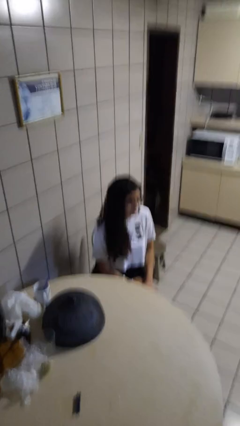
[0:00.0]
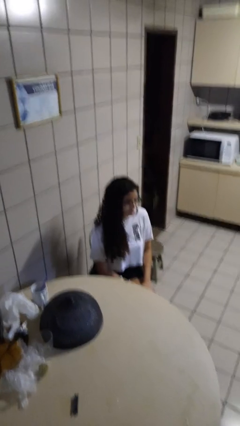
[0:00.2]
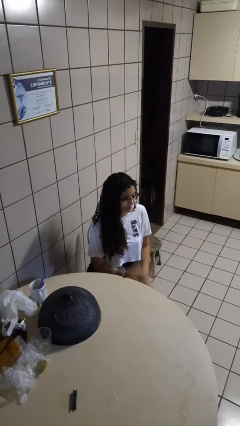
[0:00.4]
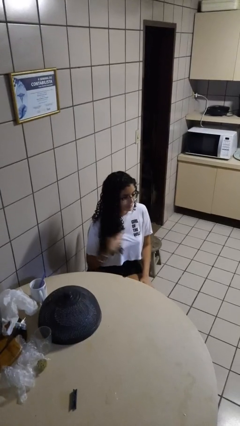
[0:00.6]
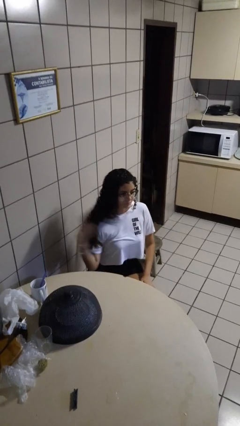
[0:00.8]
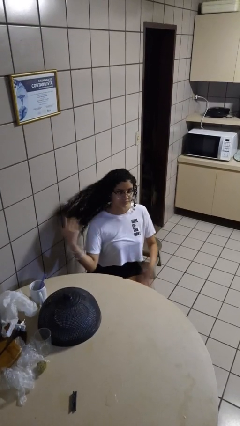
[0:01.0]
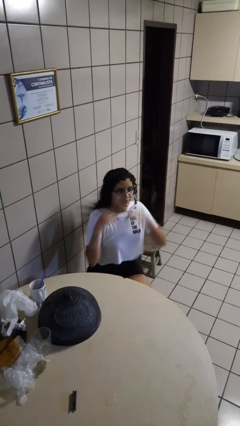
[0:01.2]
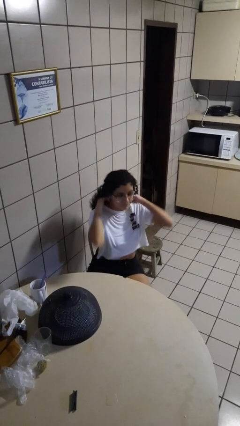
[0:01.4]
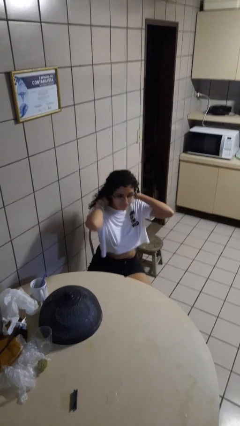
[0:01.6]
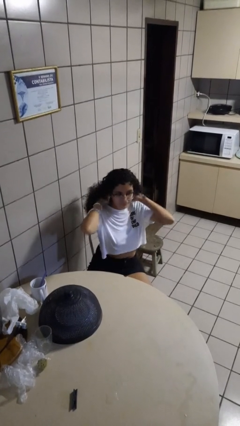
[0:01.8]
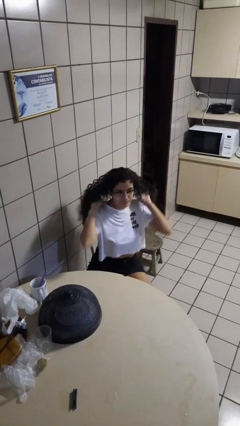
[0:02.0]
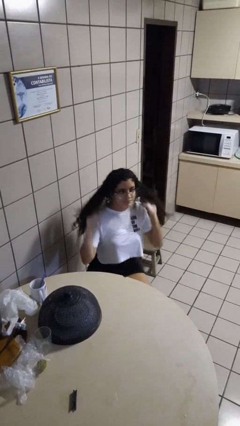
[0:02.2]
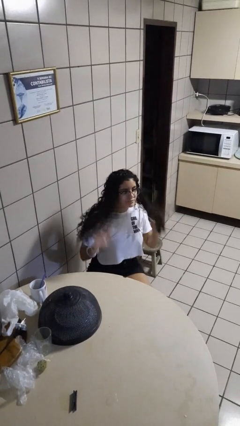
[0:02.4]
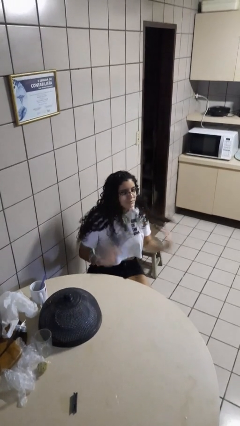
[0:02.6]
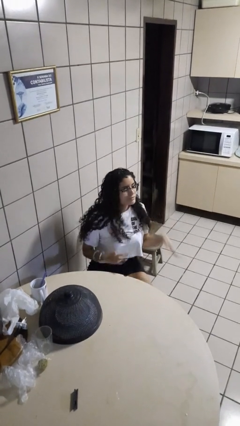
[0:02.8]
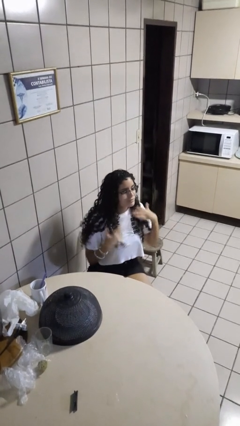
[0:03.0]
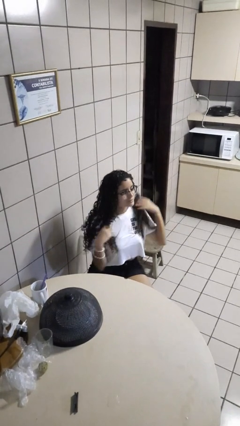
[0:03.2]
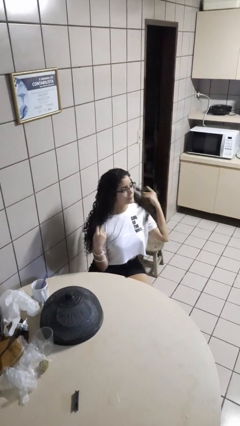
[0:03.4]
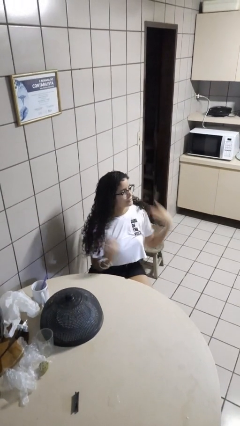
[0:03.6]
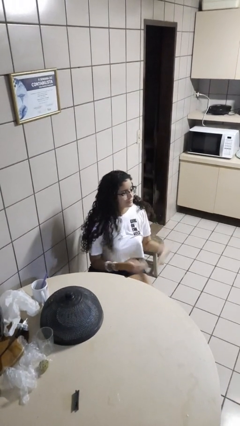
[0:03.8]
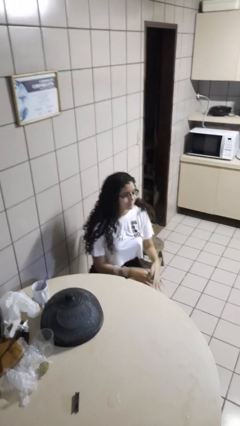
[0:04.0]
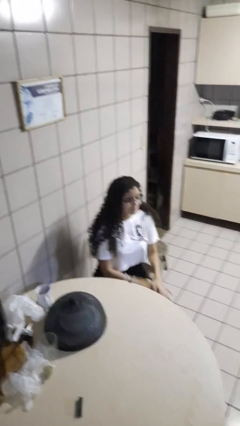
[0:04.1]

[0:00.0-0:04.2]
person strokes hair

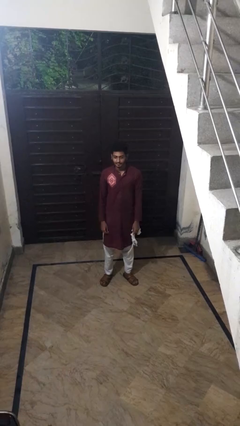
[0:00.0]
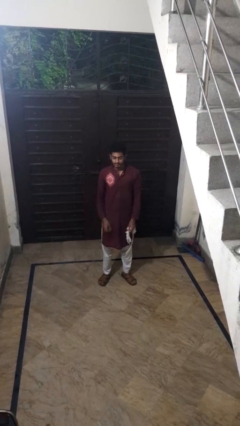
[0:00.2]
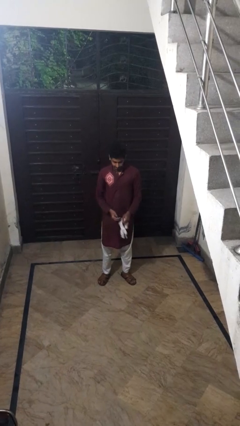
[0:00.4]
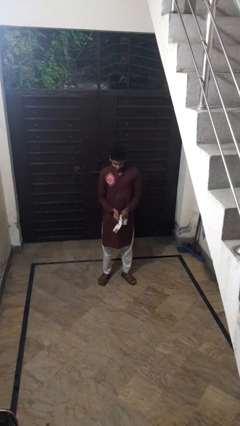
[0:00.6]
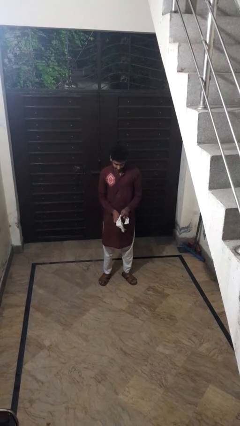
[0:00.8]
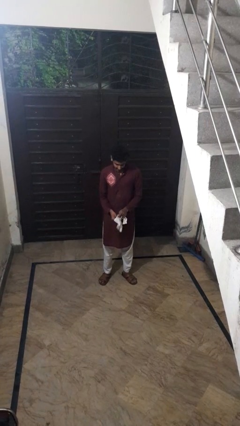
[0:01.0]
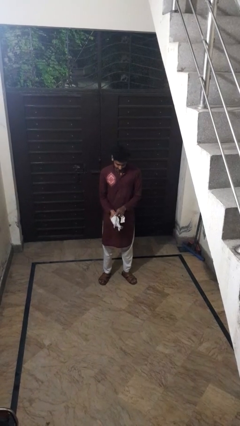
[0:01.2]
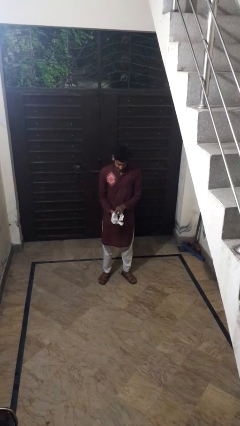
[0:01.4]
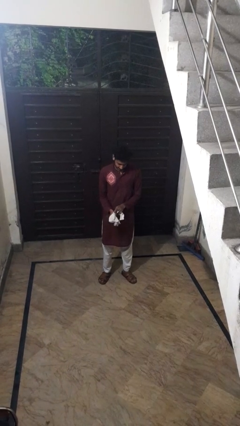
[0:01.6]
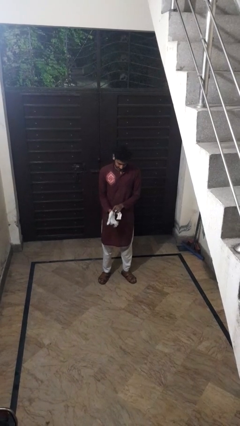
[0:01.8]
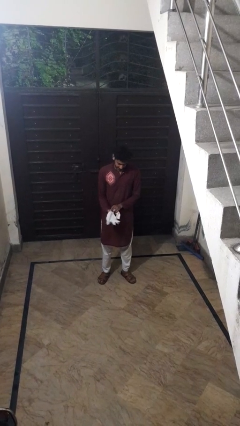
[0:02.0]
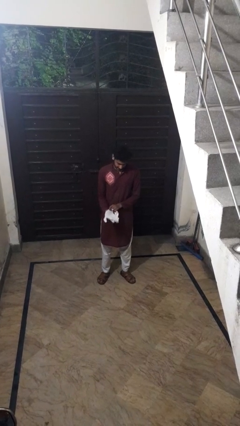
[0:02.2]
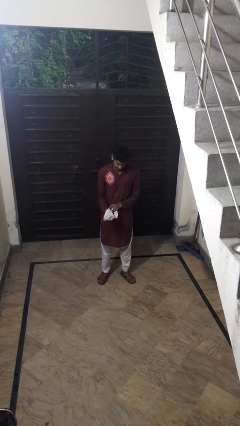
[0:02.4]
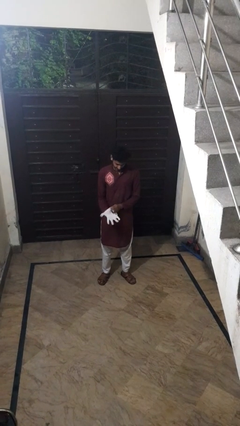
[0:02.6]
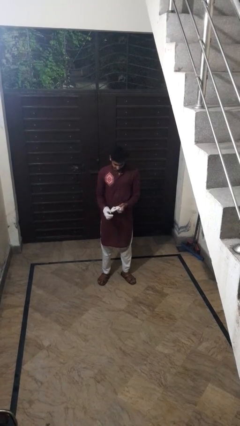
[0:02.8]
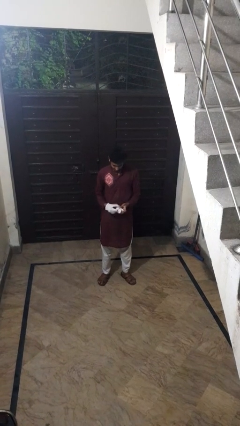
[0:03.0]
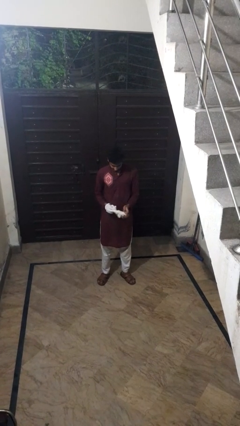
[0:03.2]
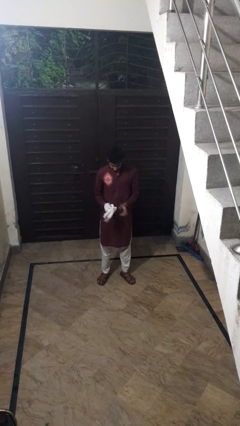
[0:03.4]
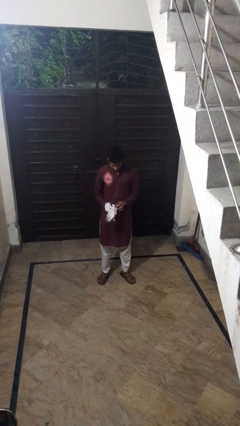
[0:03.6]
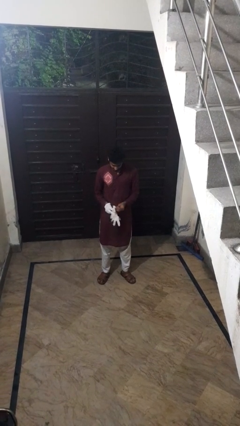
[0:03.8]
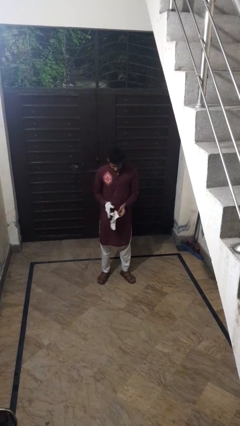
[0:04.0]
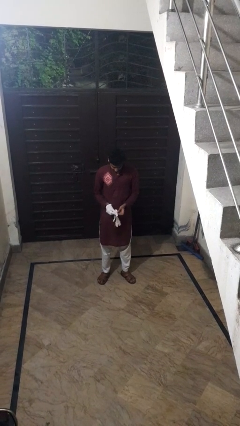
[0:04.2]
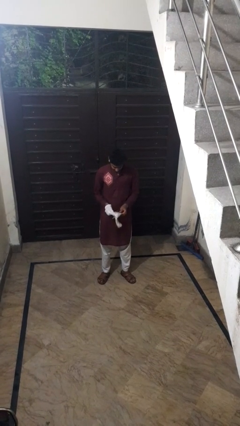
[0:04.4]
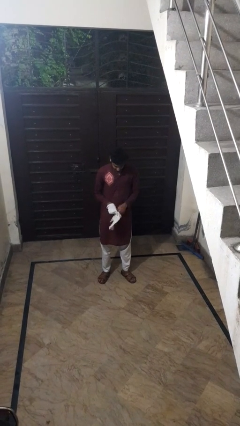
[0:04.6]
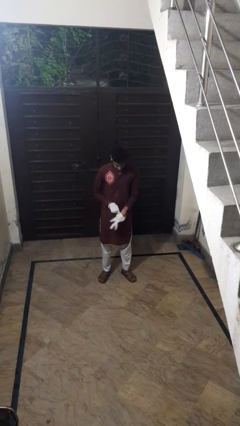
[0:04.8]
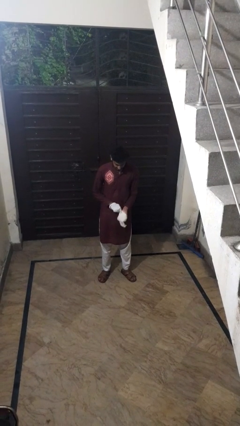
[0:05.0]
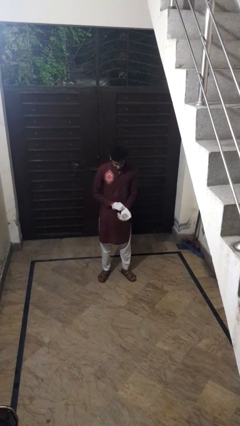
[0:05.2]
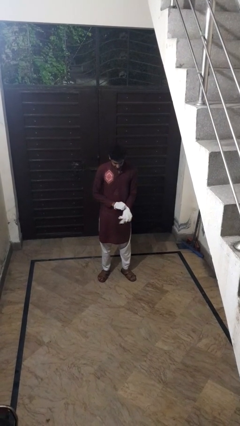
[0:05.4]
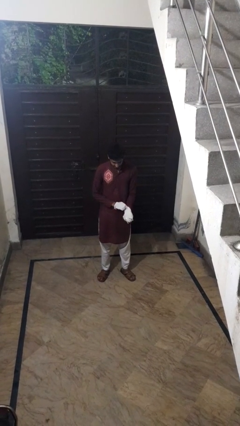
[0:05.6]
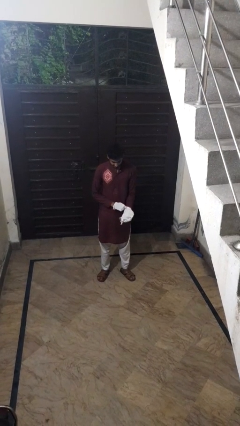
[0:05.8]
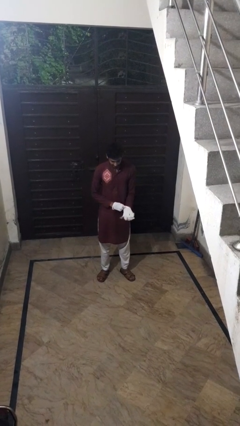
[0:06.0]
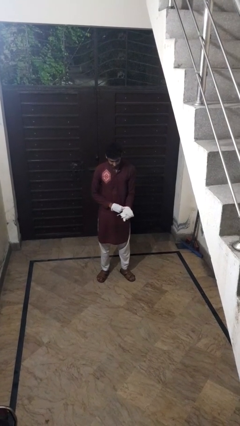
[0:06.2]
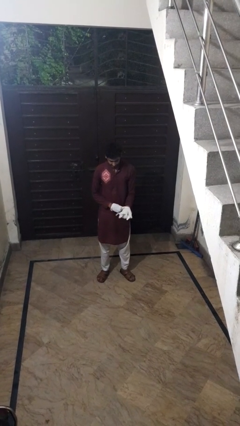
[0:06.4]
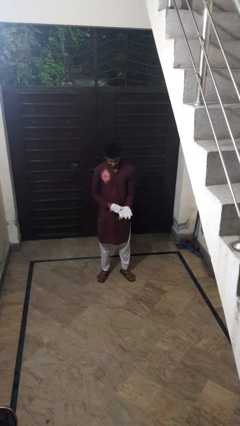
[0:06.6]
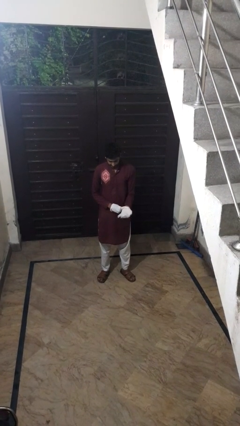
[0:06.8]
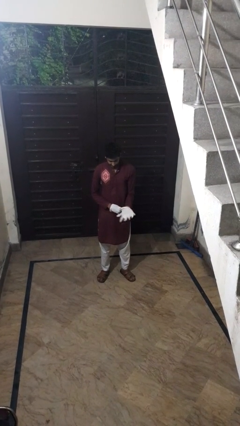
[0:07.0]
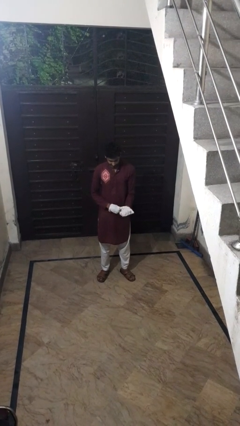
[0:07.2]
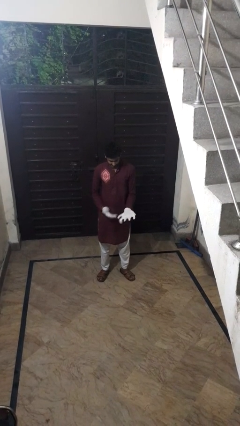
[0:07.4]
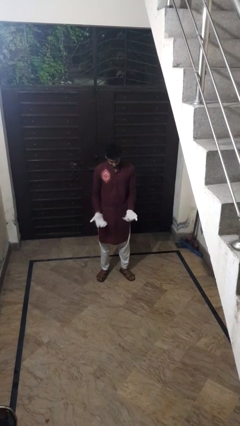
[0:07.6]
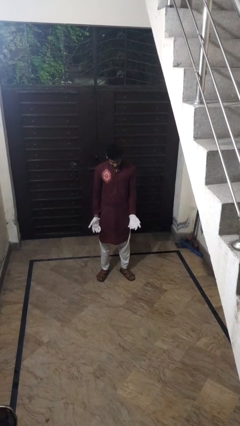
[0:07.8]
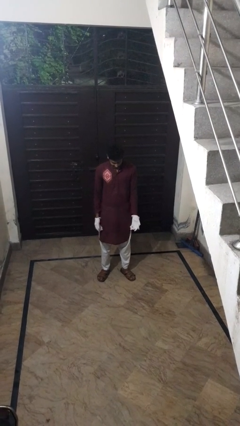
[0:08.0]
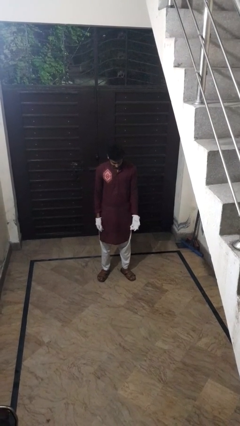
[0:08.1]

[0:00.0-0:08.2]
person puts on gloves

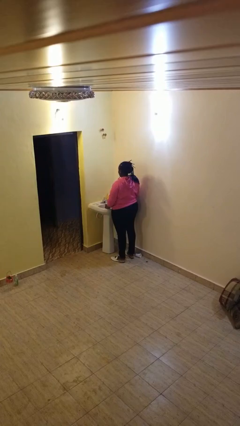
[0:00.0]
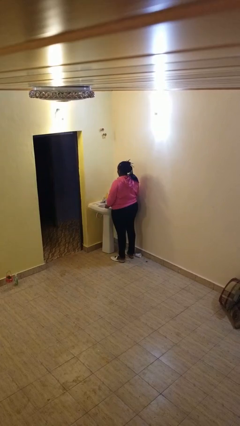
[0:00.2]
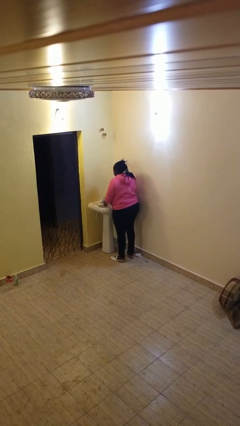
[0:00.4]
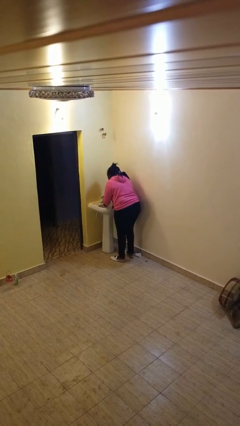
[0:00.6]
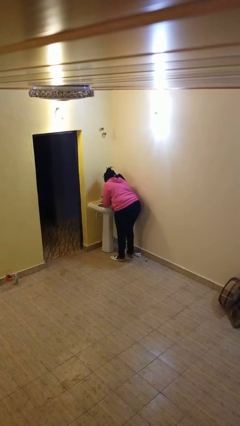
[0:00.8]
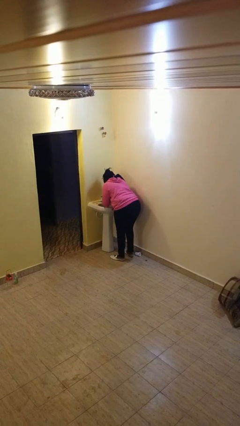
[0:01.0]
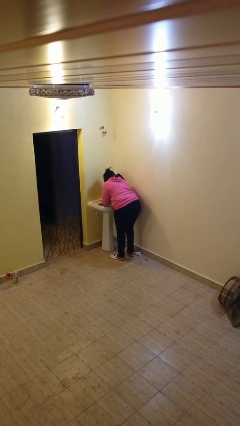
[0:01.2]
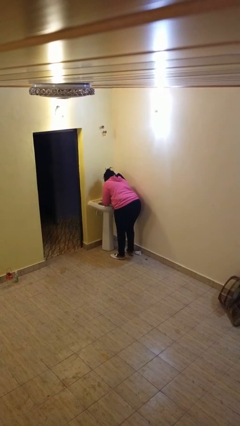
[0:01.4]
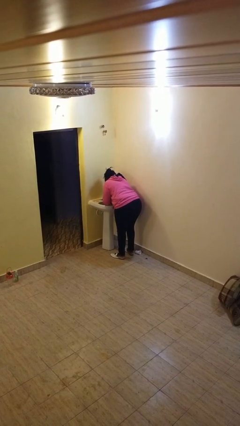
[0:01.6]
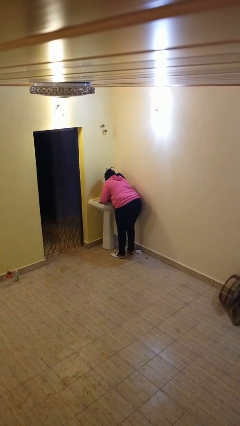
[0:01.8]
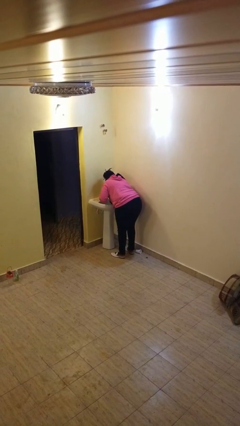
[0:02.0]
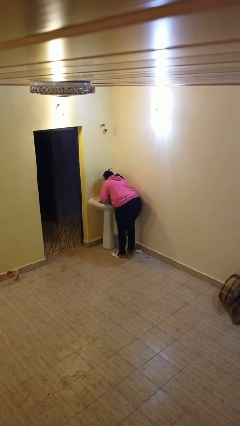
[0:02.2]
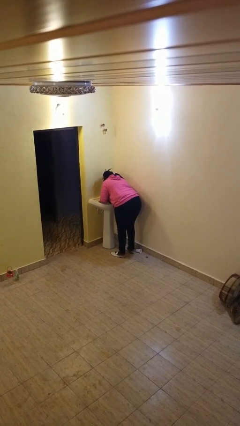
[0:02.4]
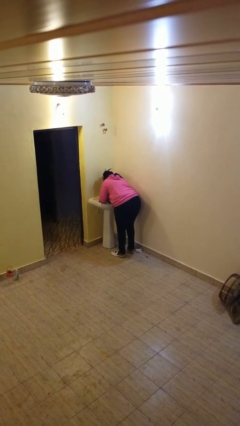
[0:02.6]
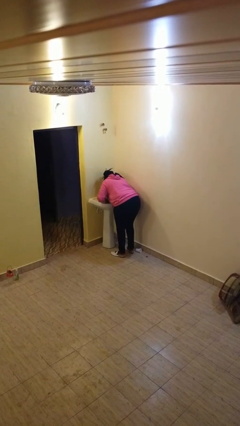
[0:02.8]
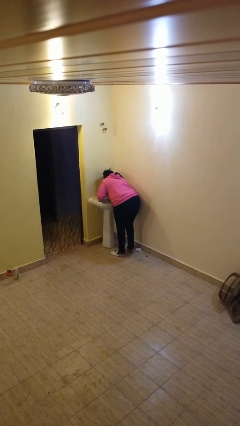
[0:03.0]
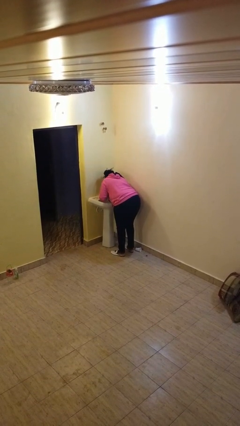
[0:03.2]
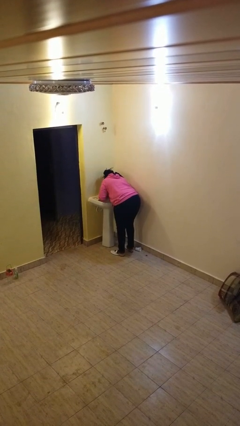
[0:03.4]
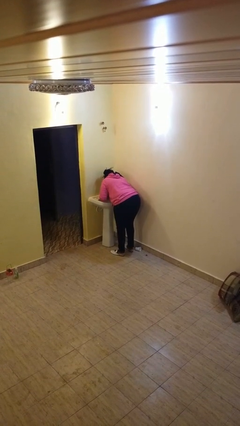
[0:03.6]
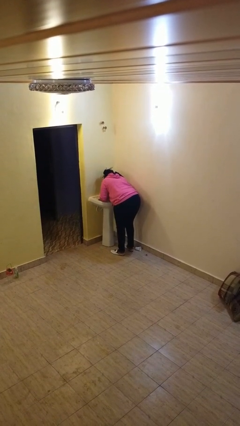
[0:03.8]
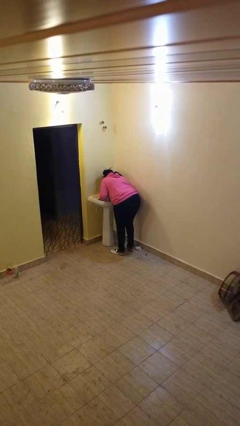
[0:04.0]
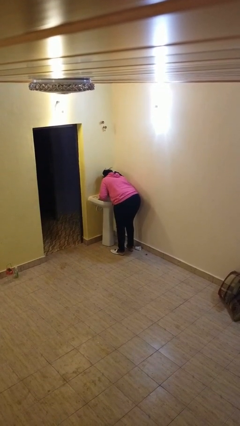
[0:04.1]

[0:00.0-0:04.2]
person washes face

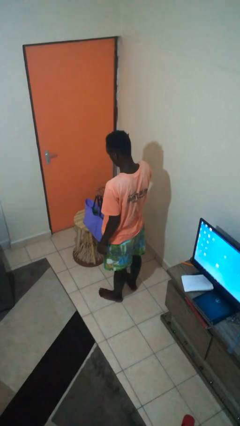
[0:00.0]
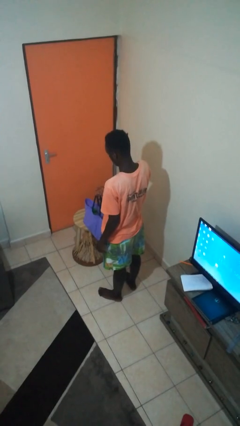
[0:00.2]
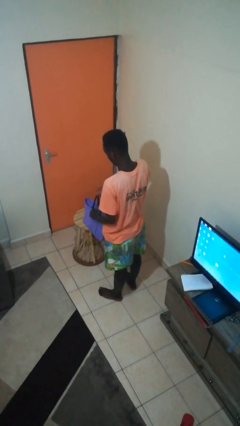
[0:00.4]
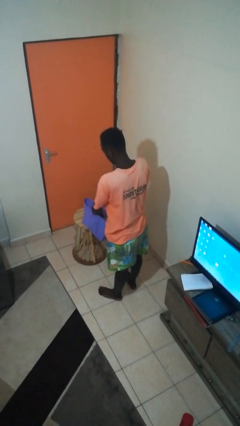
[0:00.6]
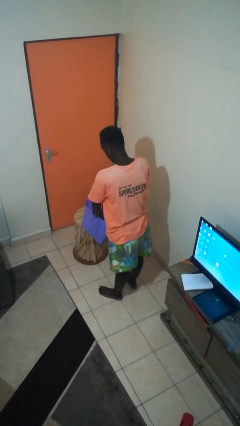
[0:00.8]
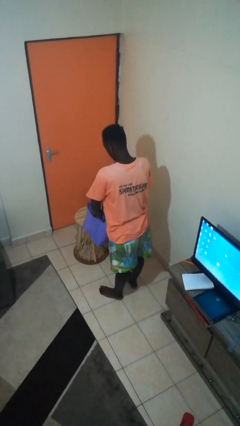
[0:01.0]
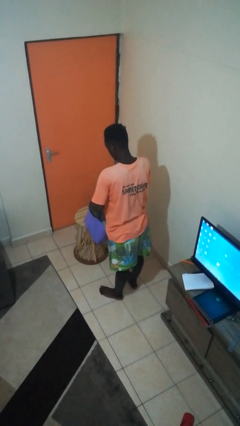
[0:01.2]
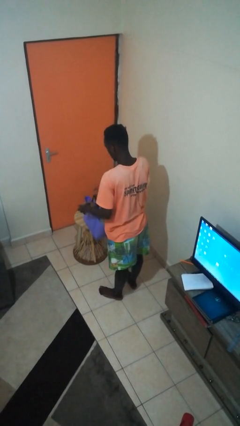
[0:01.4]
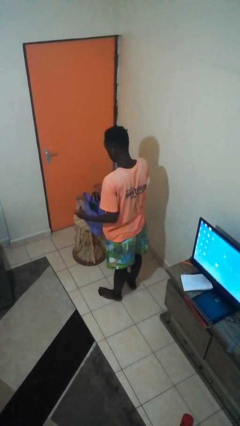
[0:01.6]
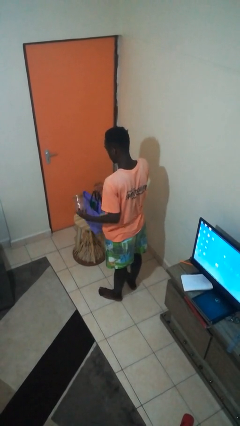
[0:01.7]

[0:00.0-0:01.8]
person takes object from bag
